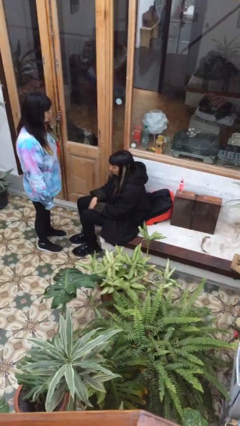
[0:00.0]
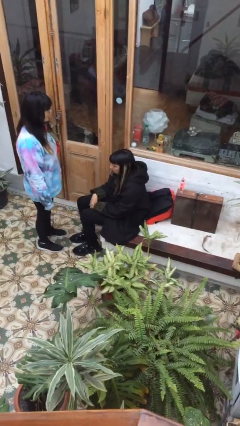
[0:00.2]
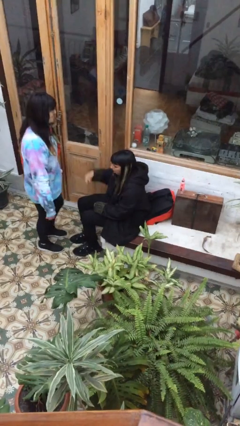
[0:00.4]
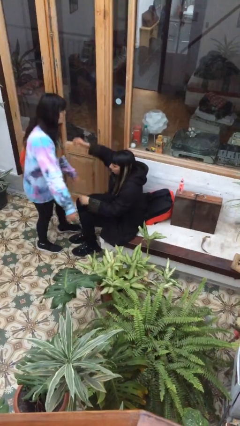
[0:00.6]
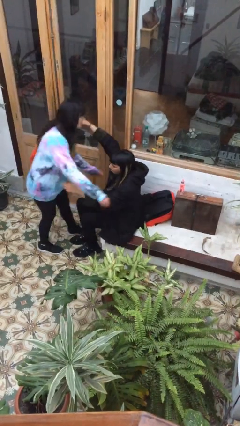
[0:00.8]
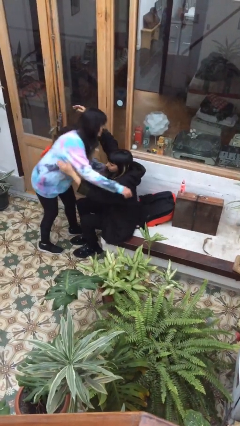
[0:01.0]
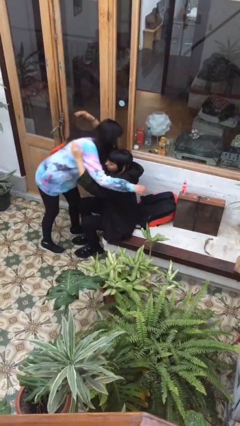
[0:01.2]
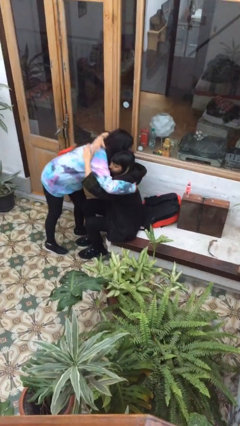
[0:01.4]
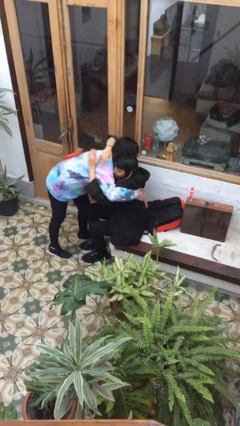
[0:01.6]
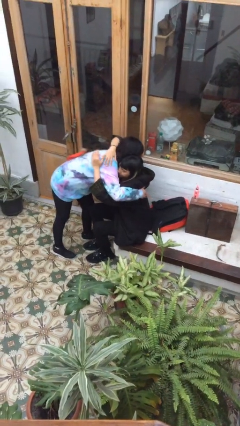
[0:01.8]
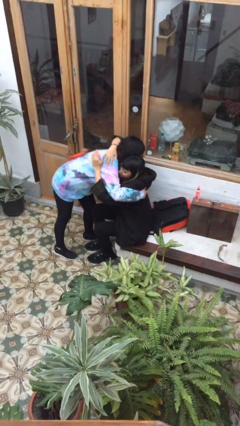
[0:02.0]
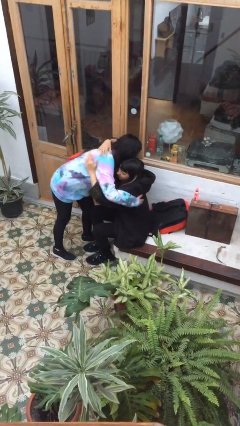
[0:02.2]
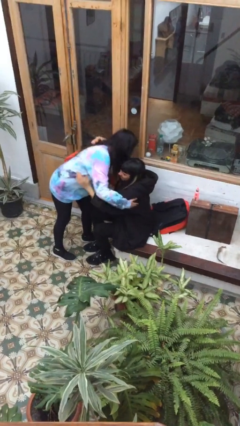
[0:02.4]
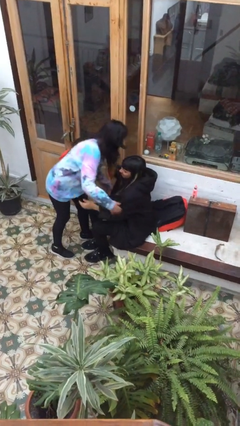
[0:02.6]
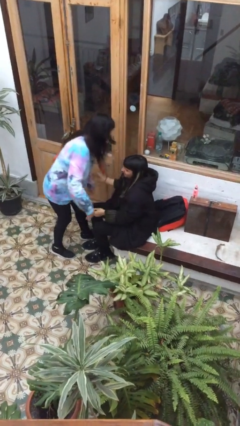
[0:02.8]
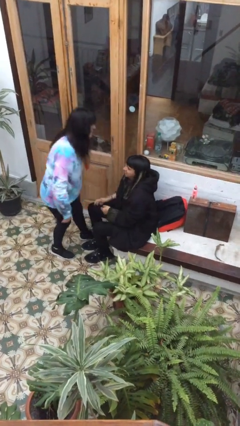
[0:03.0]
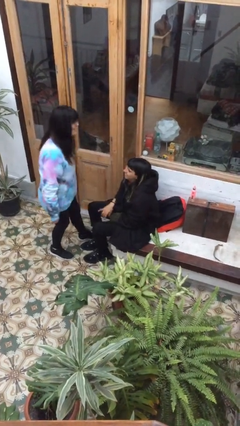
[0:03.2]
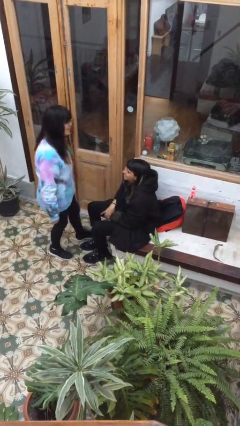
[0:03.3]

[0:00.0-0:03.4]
person embraces person

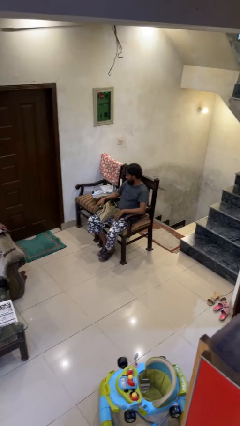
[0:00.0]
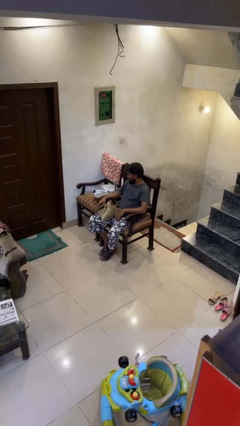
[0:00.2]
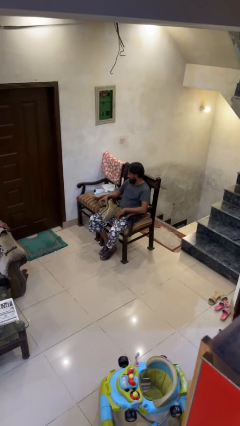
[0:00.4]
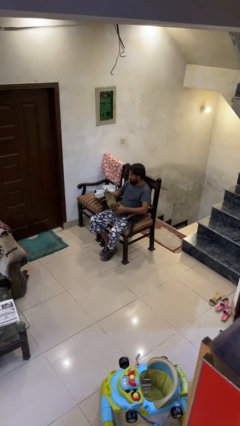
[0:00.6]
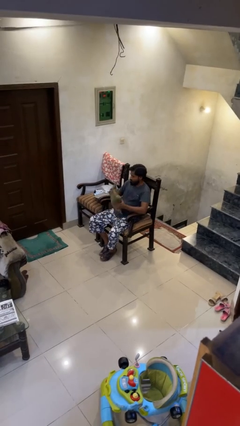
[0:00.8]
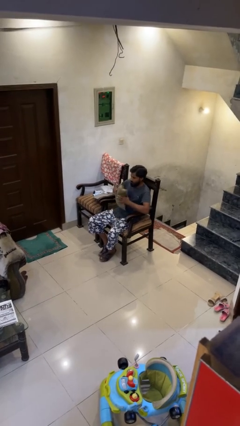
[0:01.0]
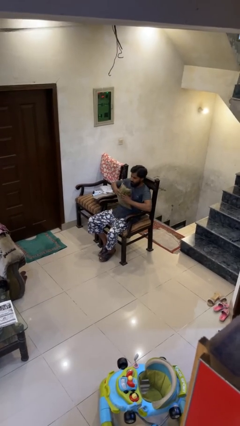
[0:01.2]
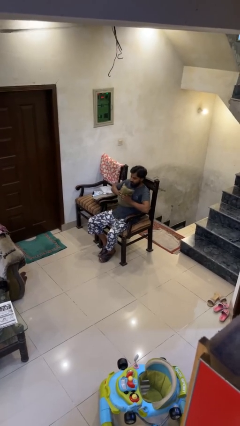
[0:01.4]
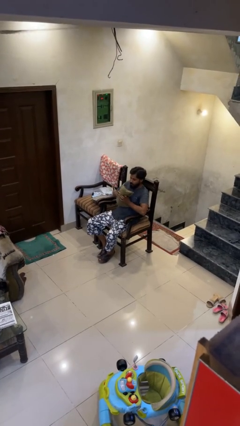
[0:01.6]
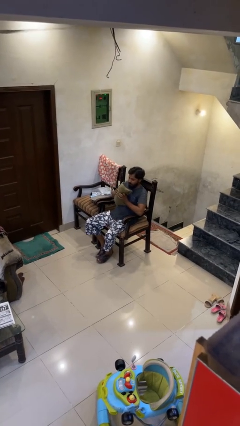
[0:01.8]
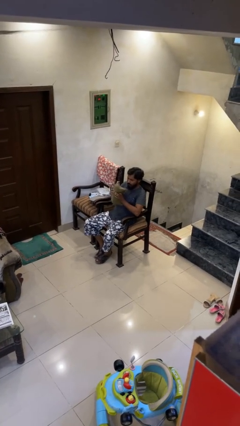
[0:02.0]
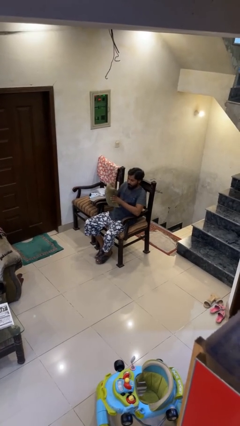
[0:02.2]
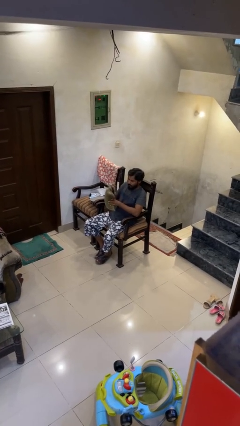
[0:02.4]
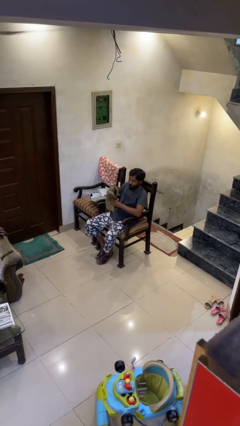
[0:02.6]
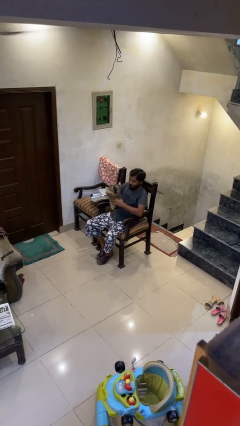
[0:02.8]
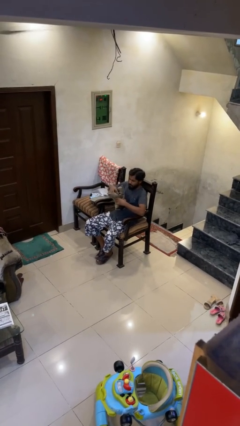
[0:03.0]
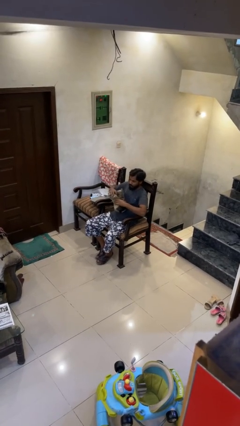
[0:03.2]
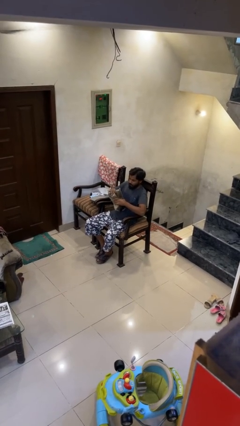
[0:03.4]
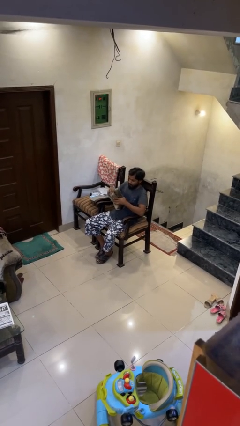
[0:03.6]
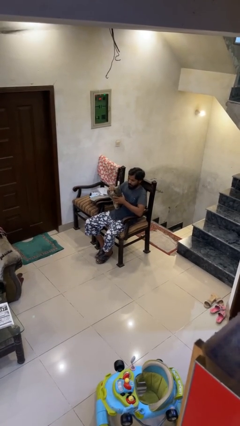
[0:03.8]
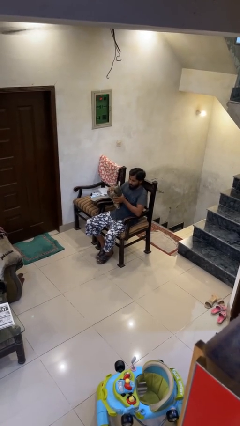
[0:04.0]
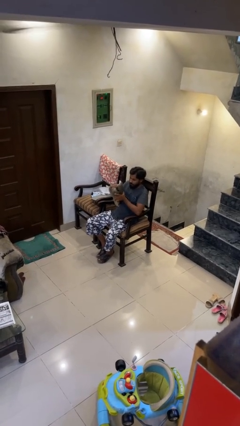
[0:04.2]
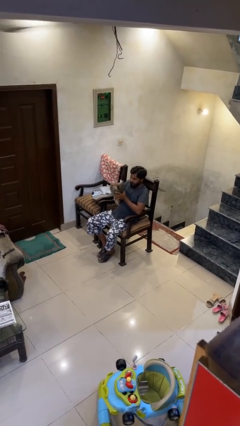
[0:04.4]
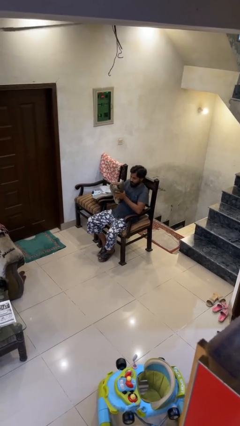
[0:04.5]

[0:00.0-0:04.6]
person squeezes object

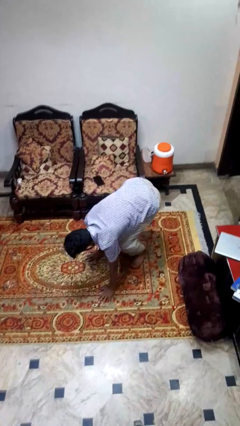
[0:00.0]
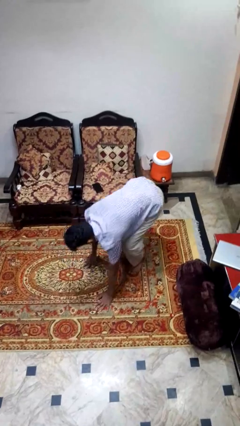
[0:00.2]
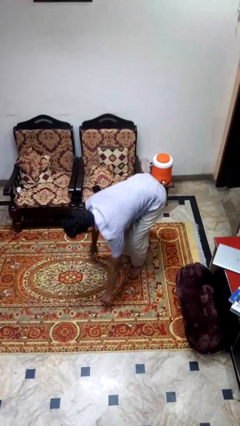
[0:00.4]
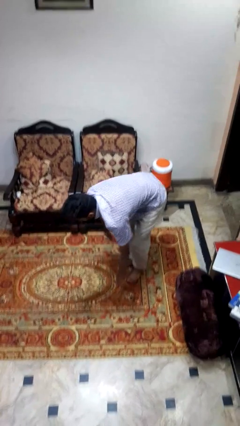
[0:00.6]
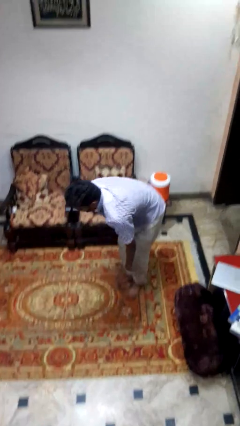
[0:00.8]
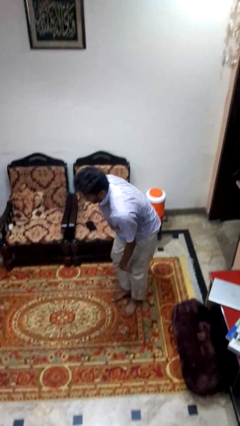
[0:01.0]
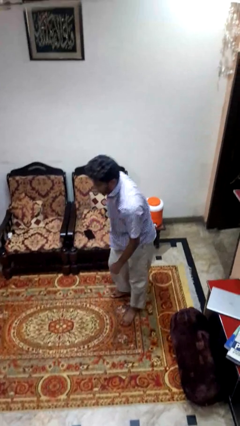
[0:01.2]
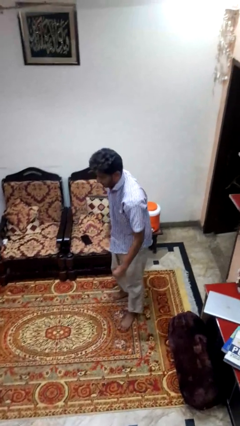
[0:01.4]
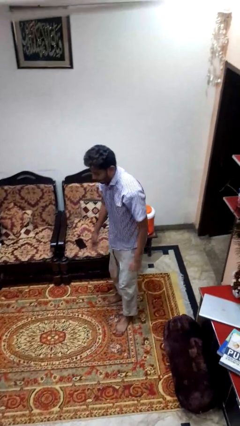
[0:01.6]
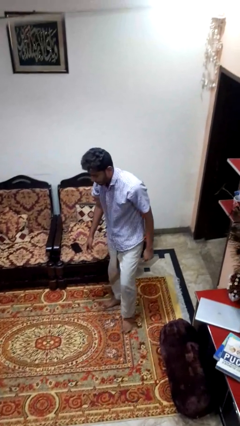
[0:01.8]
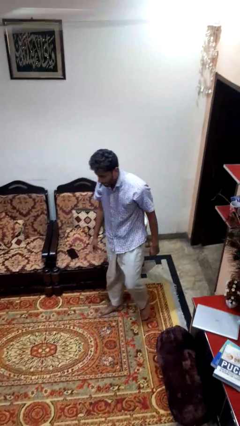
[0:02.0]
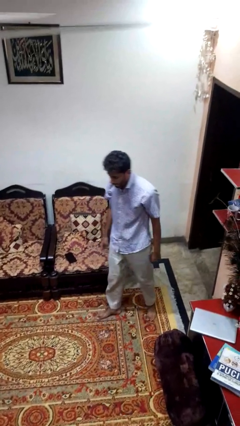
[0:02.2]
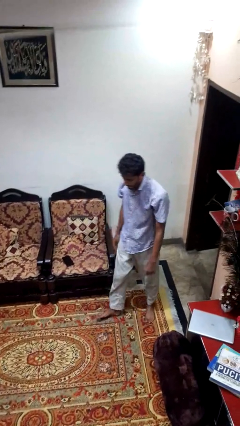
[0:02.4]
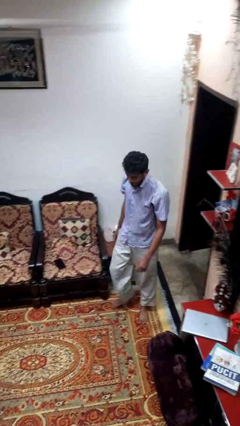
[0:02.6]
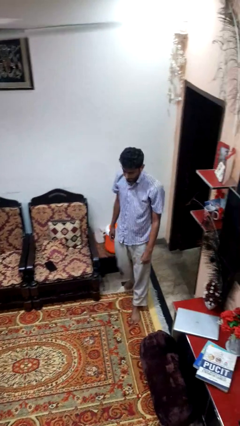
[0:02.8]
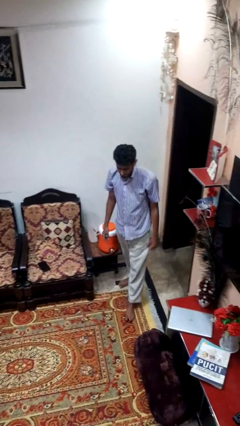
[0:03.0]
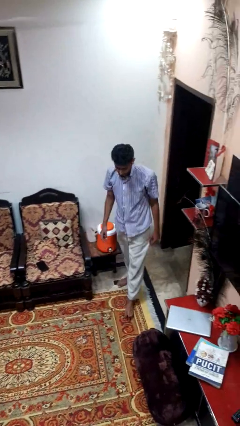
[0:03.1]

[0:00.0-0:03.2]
person stands up from floor

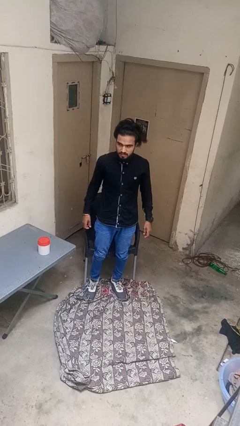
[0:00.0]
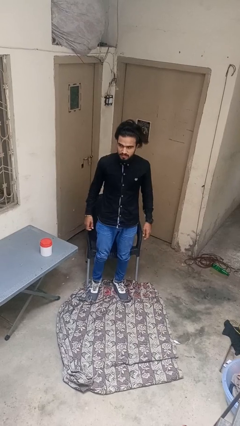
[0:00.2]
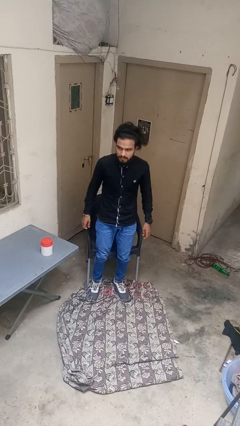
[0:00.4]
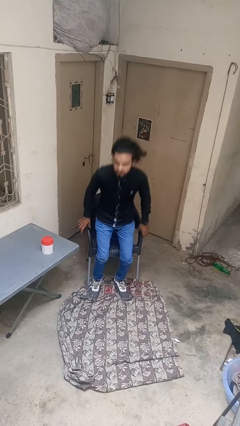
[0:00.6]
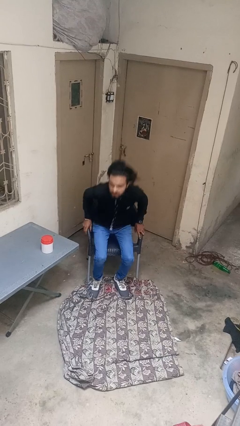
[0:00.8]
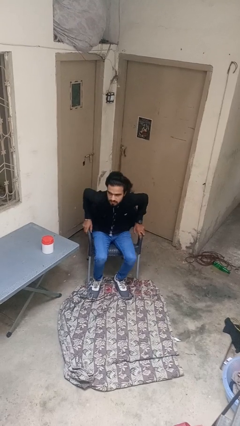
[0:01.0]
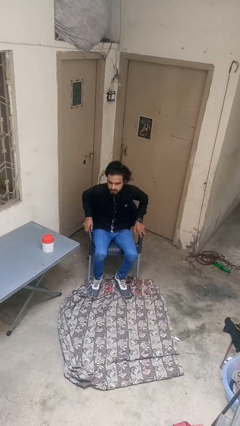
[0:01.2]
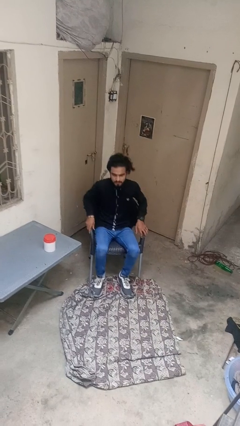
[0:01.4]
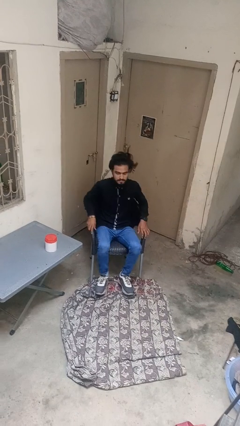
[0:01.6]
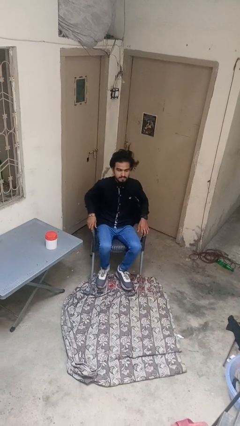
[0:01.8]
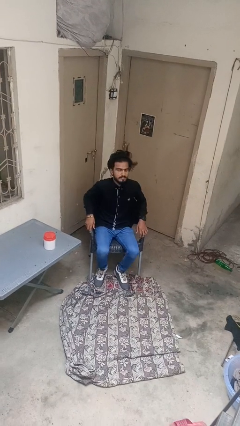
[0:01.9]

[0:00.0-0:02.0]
person sits down

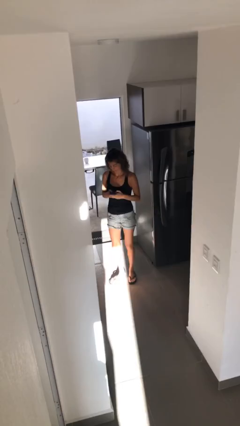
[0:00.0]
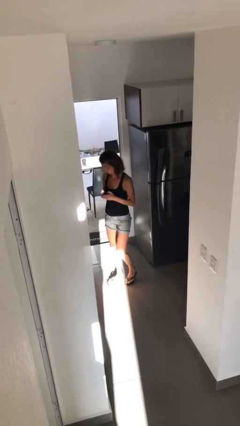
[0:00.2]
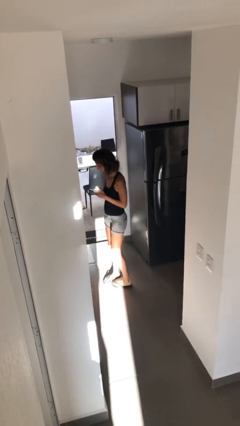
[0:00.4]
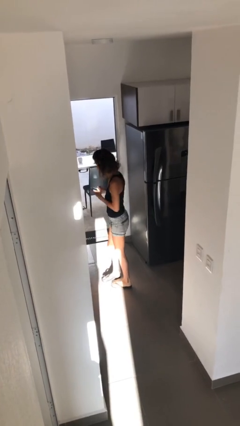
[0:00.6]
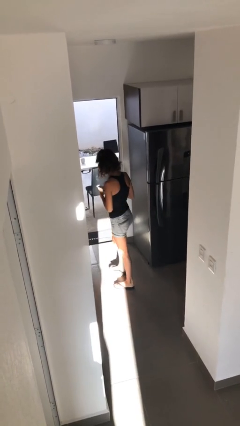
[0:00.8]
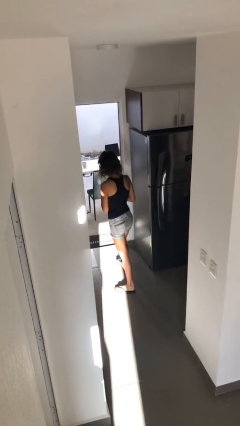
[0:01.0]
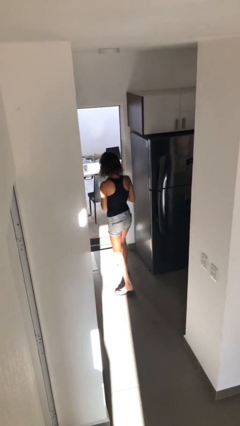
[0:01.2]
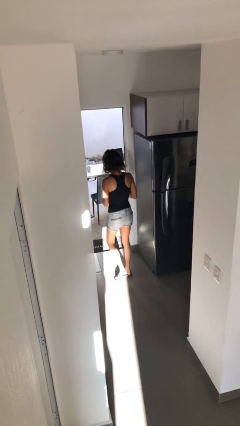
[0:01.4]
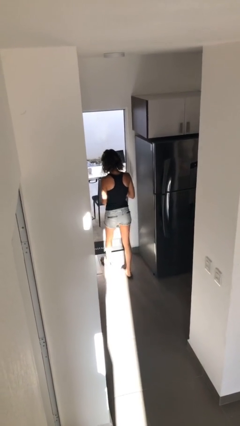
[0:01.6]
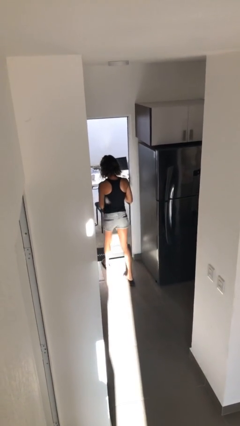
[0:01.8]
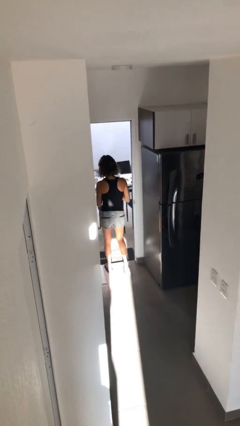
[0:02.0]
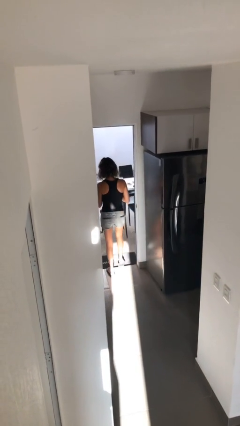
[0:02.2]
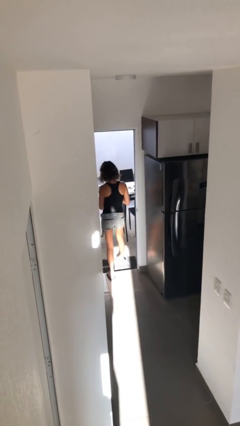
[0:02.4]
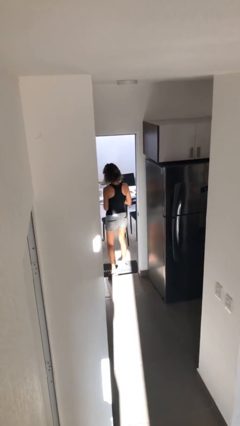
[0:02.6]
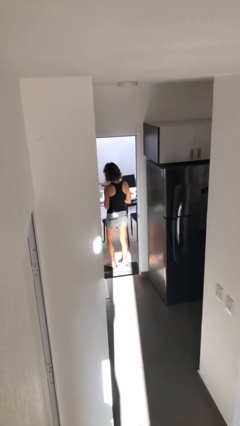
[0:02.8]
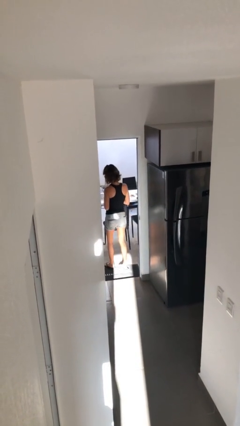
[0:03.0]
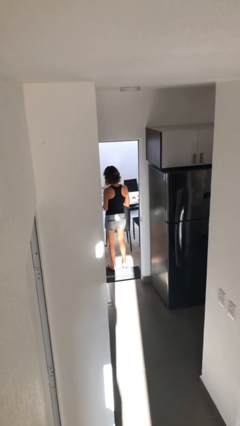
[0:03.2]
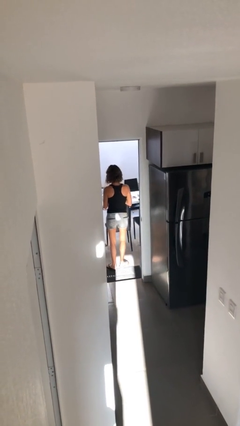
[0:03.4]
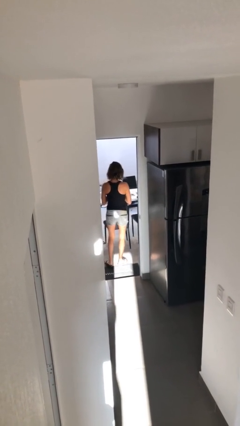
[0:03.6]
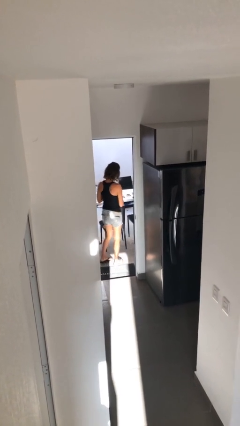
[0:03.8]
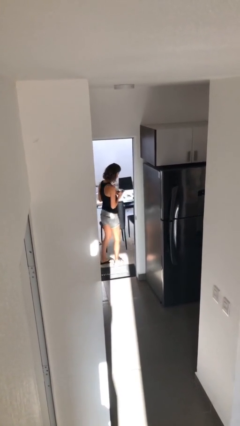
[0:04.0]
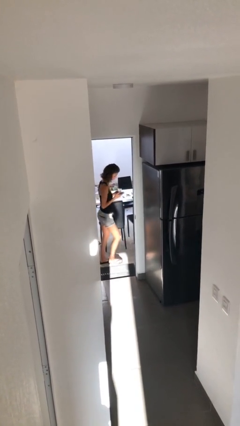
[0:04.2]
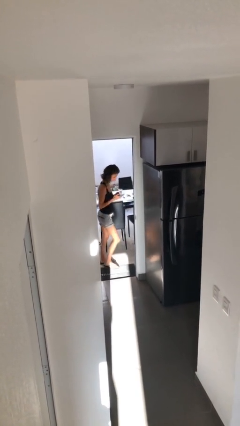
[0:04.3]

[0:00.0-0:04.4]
person exits scene through structure

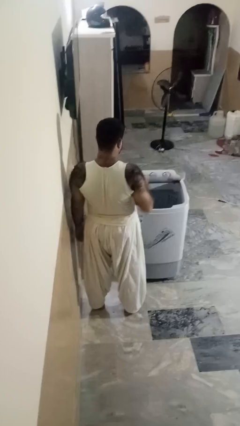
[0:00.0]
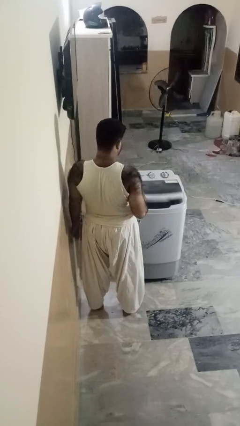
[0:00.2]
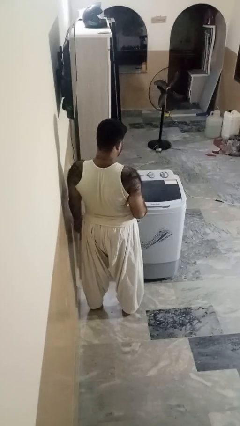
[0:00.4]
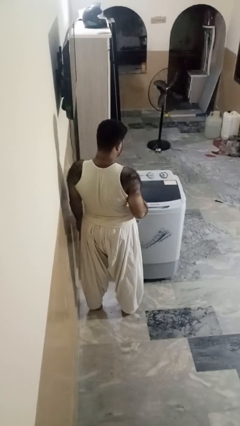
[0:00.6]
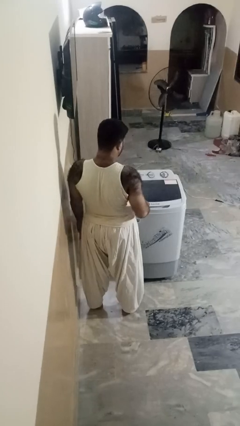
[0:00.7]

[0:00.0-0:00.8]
person closes clothes washer
